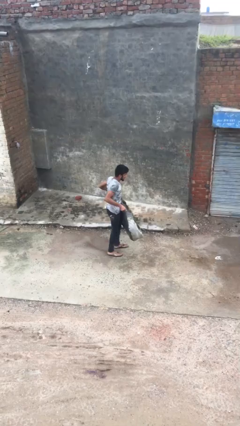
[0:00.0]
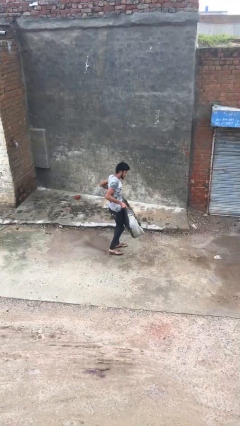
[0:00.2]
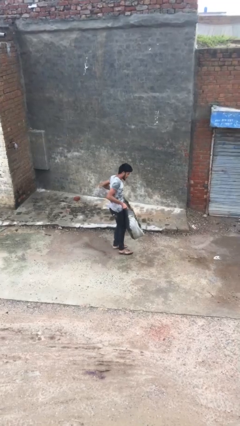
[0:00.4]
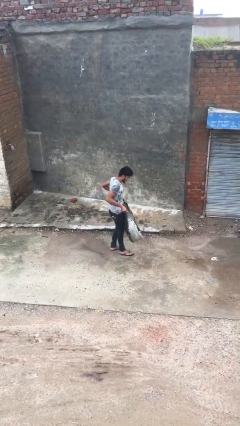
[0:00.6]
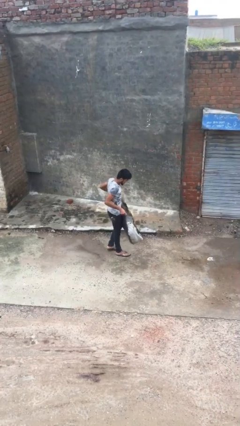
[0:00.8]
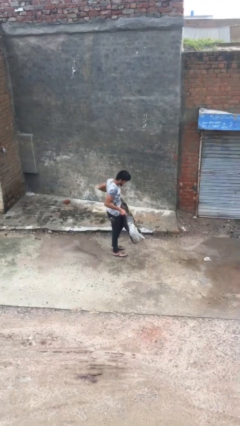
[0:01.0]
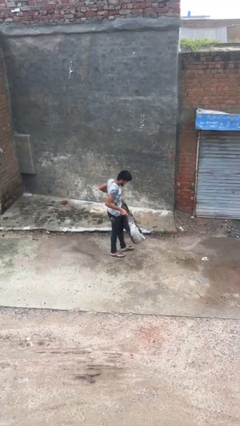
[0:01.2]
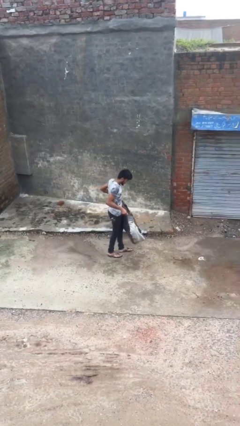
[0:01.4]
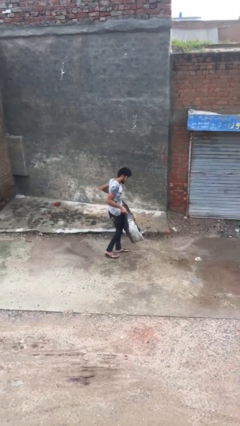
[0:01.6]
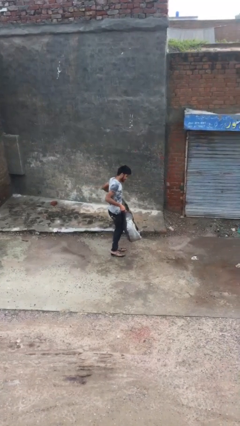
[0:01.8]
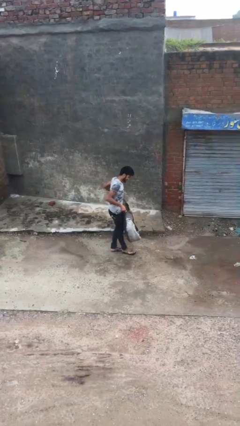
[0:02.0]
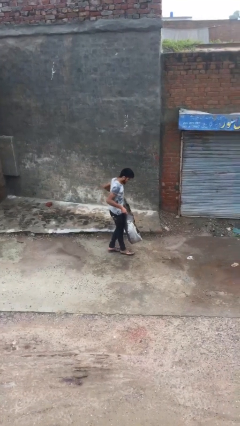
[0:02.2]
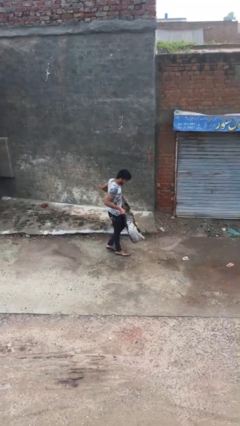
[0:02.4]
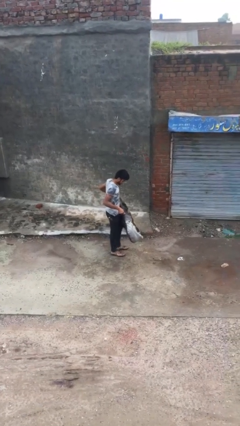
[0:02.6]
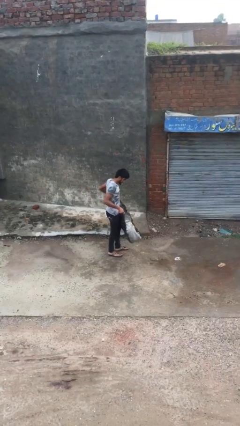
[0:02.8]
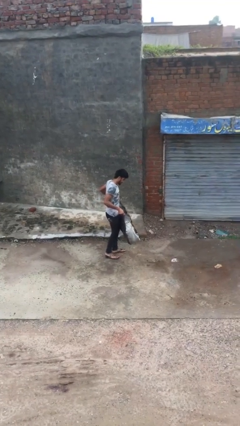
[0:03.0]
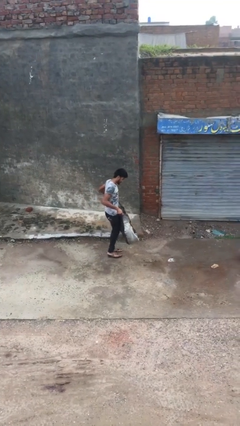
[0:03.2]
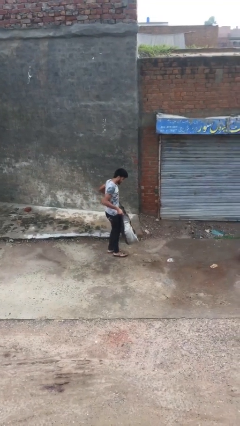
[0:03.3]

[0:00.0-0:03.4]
person carries heavy object

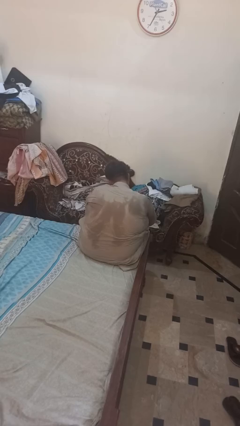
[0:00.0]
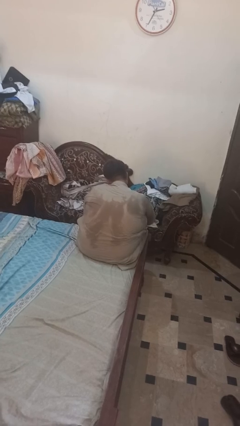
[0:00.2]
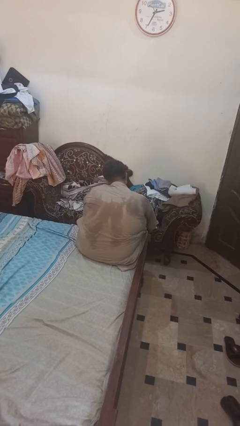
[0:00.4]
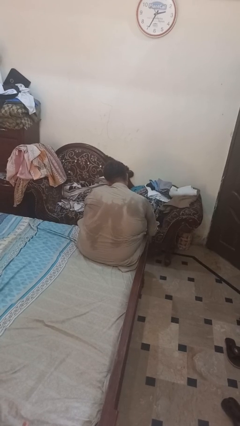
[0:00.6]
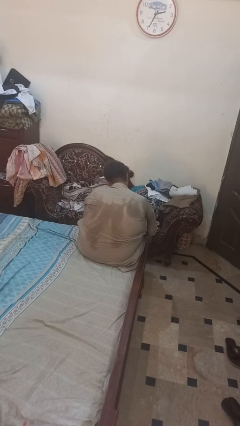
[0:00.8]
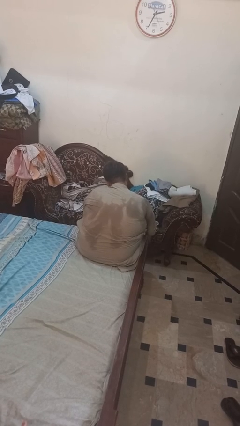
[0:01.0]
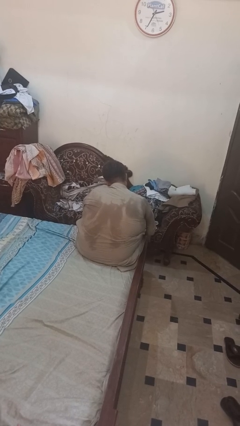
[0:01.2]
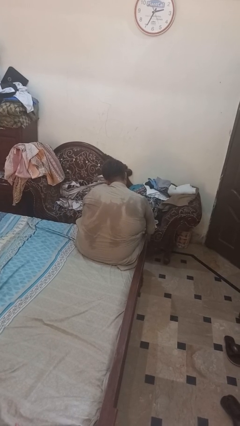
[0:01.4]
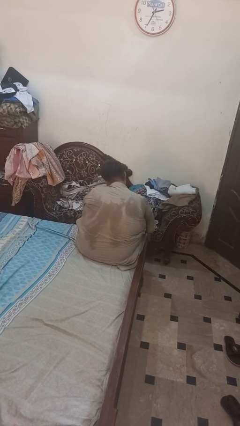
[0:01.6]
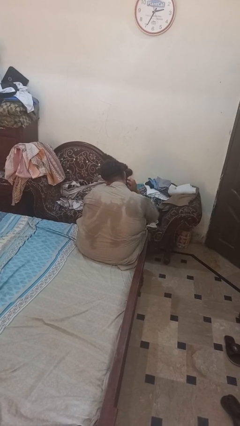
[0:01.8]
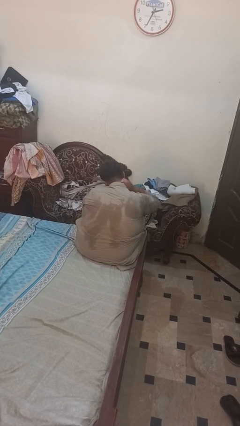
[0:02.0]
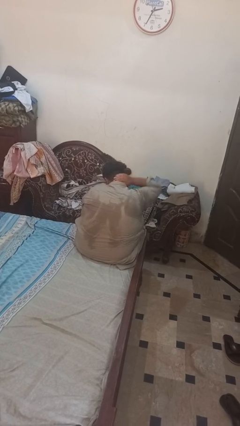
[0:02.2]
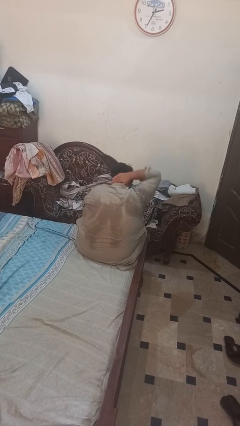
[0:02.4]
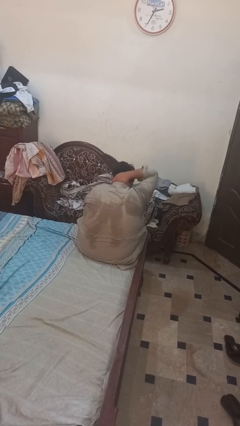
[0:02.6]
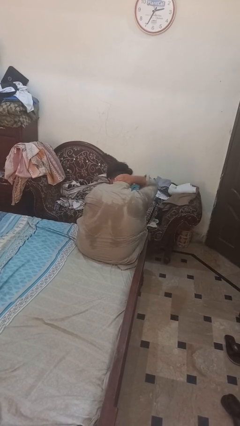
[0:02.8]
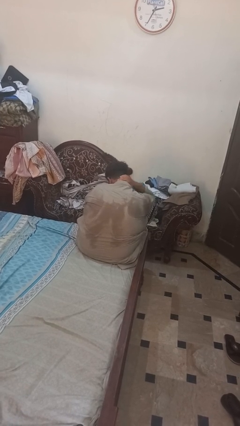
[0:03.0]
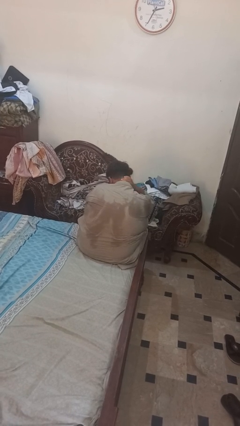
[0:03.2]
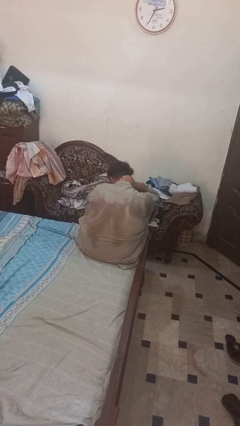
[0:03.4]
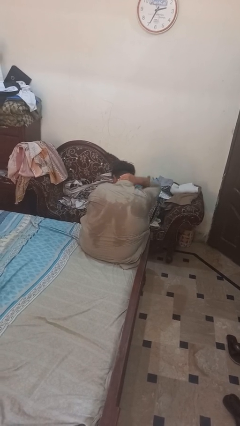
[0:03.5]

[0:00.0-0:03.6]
person rubs neck

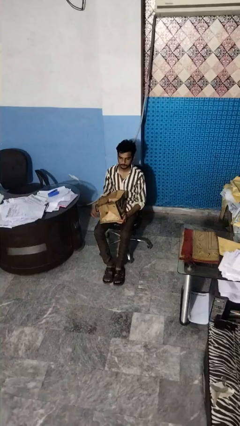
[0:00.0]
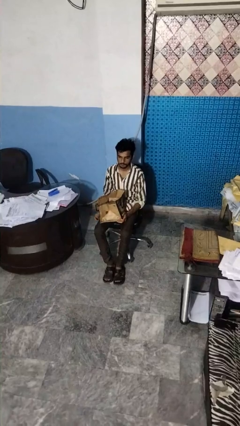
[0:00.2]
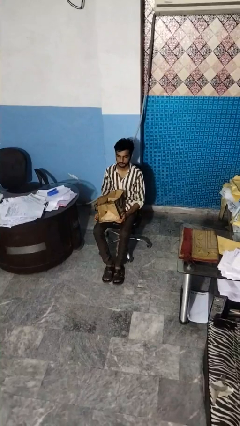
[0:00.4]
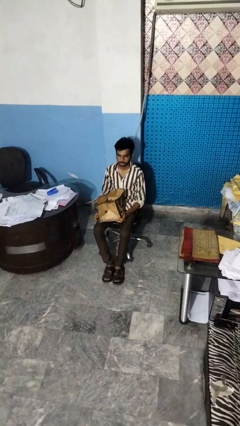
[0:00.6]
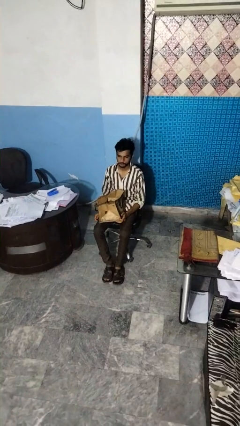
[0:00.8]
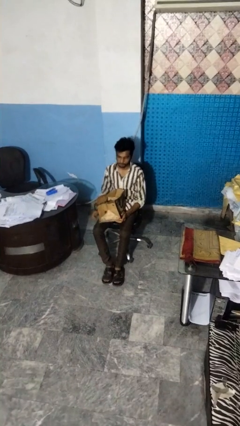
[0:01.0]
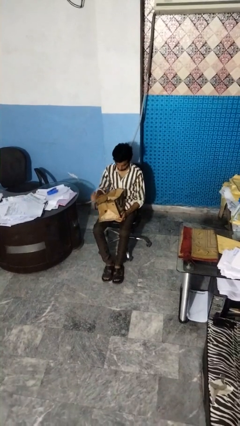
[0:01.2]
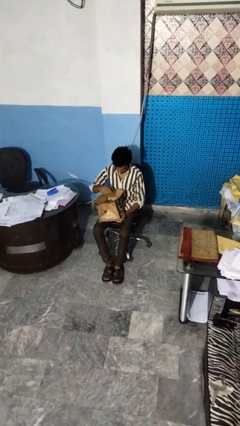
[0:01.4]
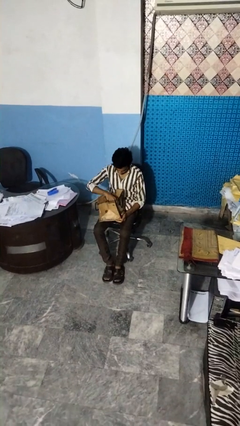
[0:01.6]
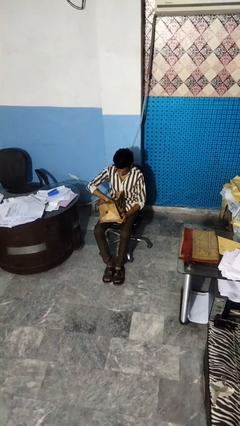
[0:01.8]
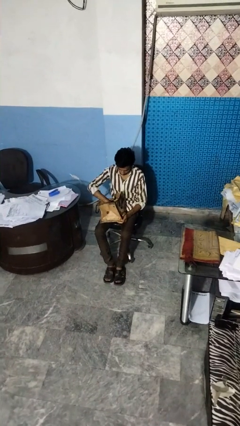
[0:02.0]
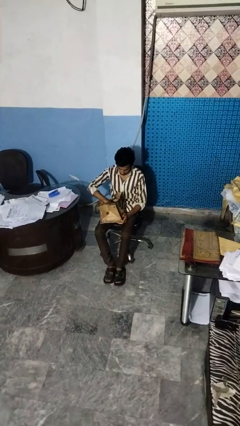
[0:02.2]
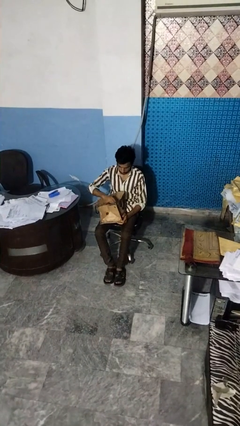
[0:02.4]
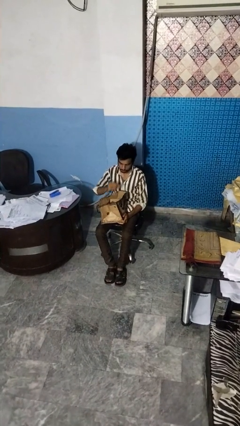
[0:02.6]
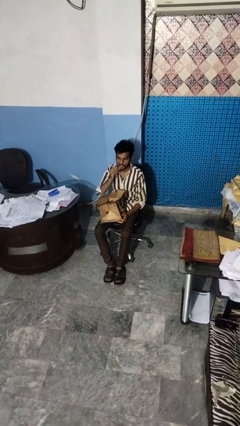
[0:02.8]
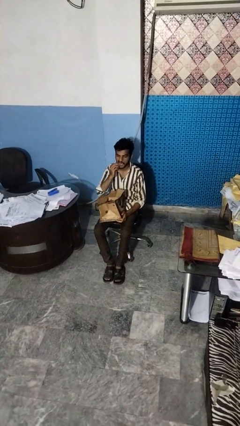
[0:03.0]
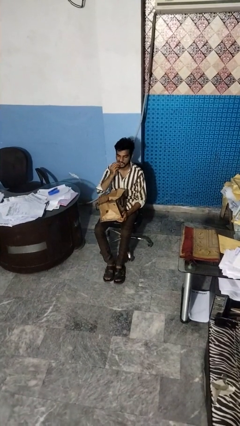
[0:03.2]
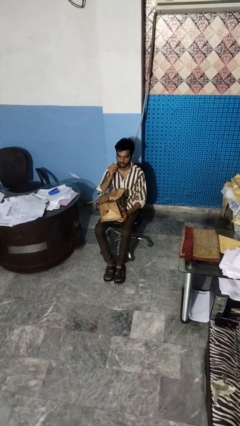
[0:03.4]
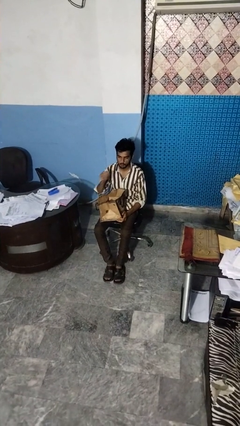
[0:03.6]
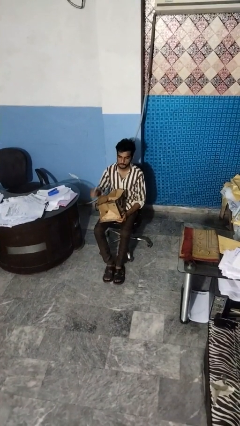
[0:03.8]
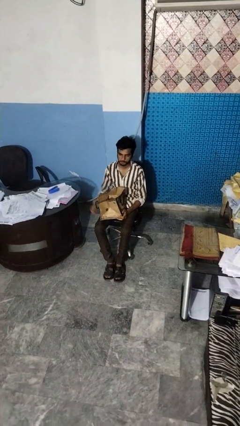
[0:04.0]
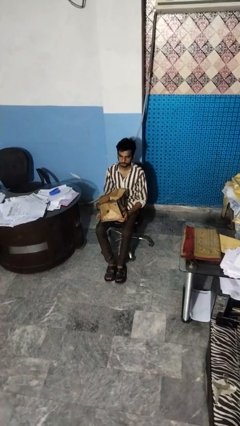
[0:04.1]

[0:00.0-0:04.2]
person eats snack from bag

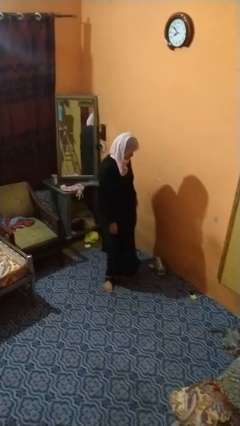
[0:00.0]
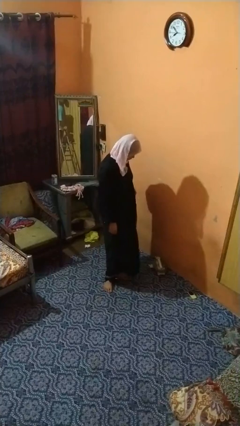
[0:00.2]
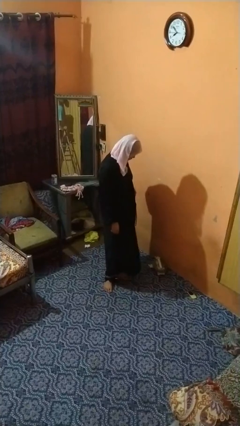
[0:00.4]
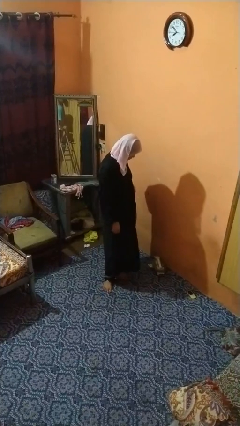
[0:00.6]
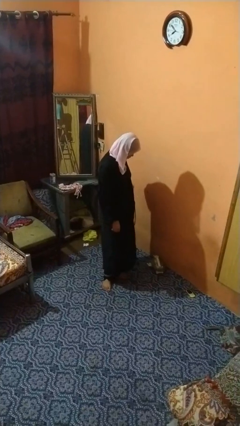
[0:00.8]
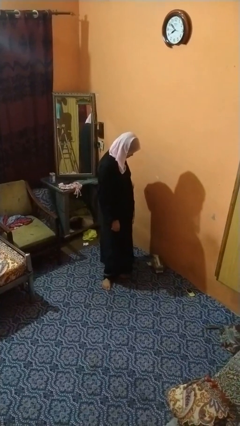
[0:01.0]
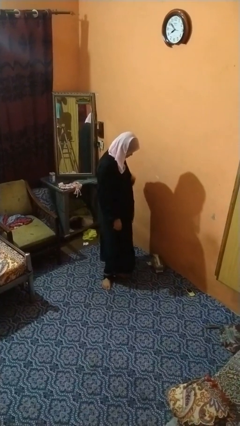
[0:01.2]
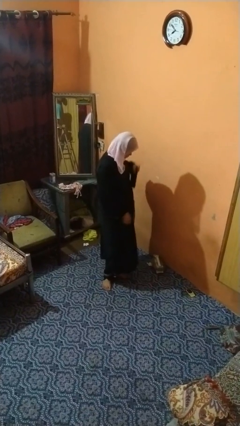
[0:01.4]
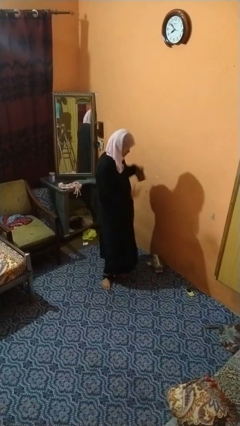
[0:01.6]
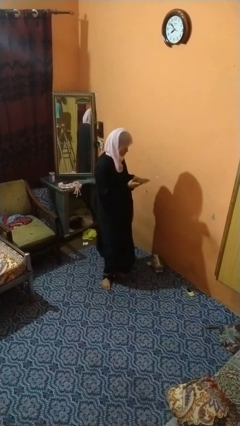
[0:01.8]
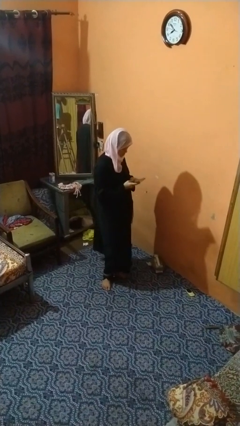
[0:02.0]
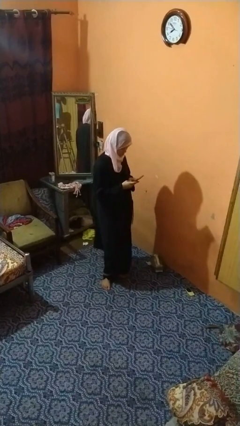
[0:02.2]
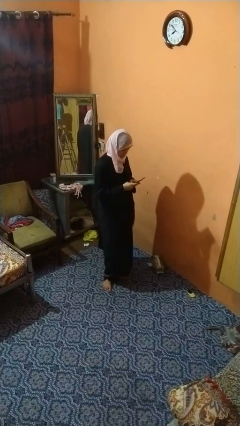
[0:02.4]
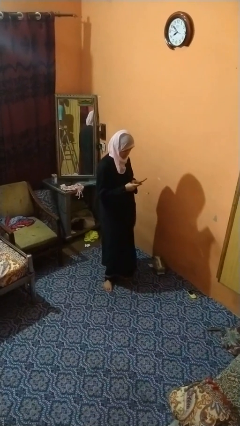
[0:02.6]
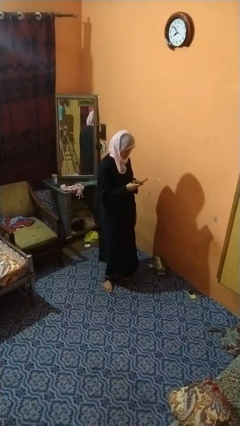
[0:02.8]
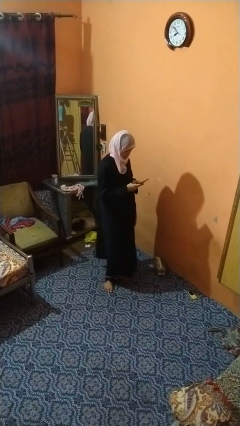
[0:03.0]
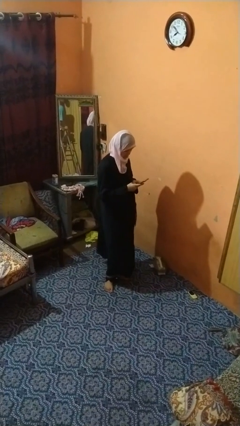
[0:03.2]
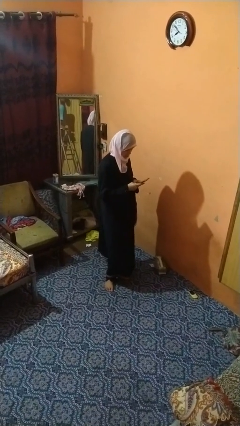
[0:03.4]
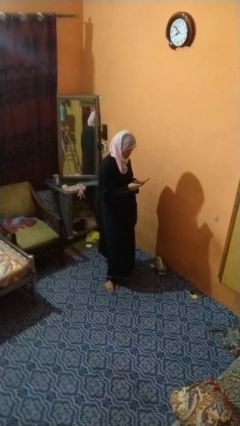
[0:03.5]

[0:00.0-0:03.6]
person takes phone from pocket

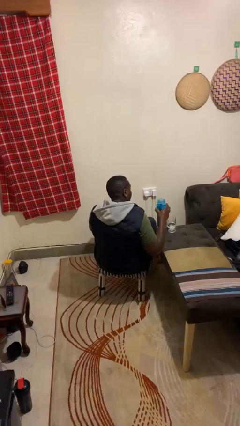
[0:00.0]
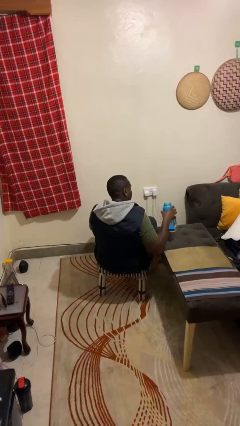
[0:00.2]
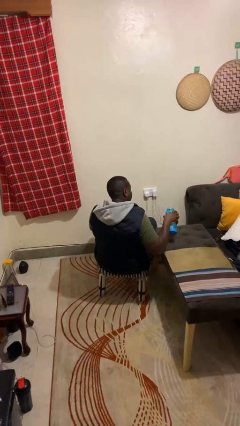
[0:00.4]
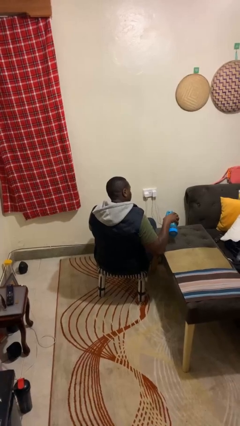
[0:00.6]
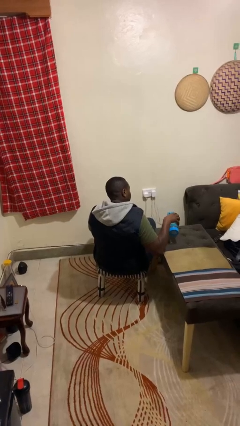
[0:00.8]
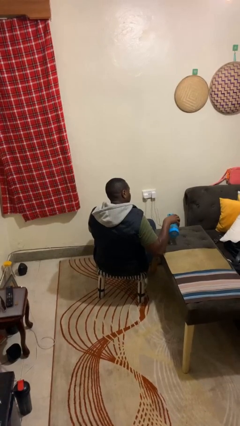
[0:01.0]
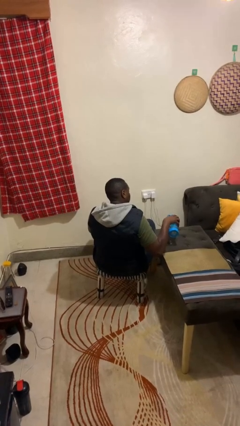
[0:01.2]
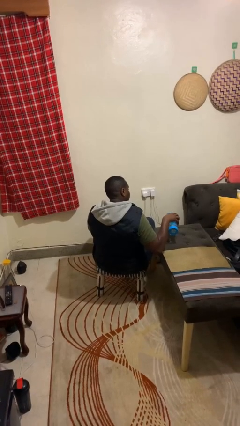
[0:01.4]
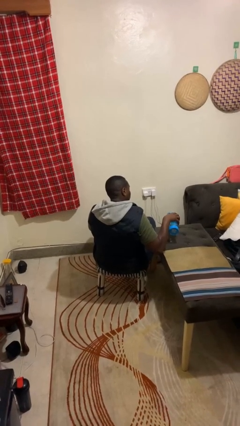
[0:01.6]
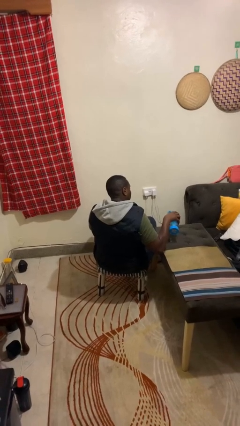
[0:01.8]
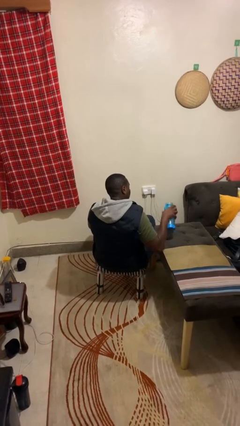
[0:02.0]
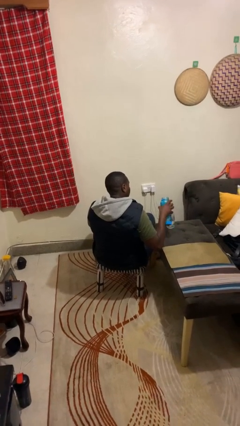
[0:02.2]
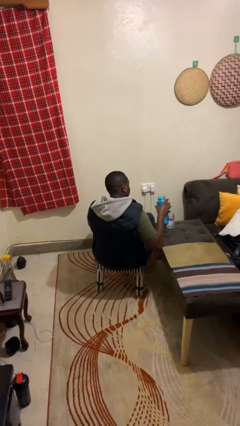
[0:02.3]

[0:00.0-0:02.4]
person pours liquid into cup
